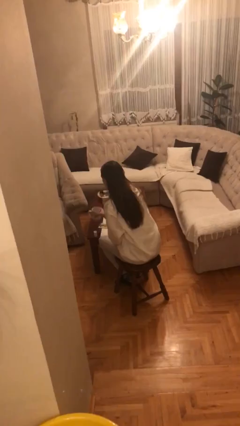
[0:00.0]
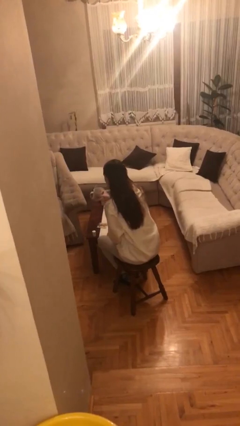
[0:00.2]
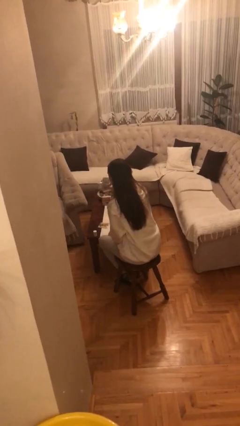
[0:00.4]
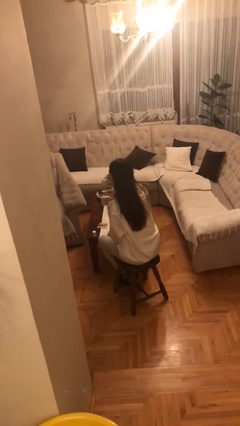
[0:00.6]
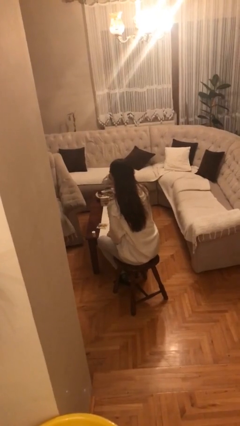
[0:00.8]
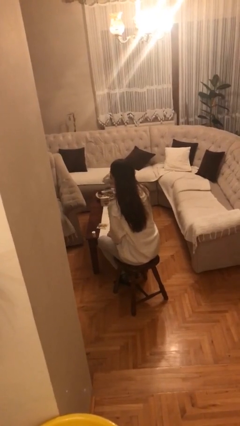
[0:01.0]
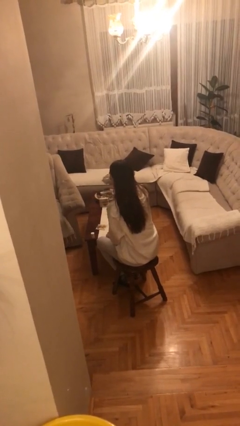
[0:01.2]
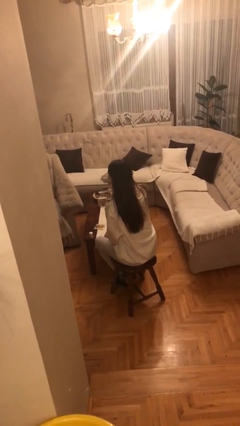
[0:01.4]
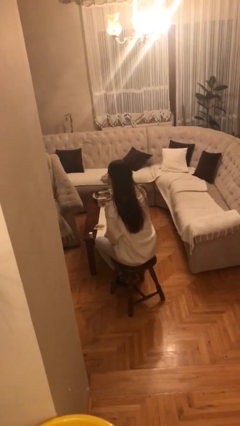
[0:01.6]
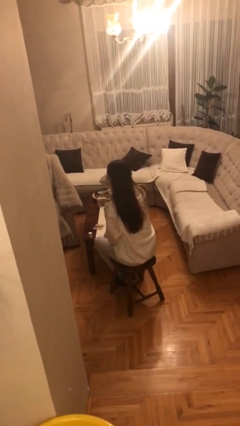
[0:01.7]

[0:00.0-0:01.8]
person drinks from cup

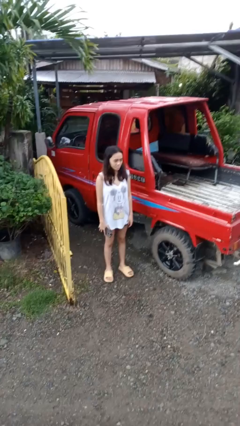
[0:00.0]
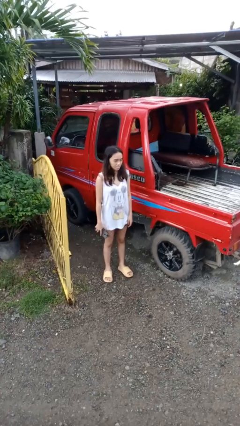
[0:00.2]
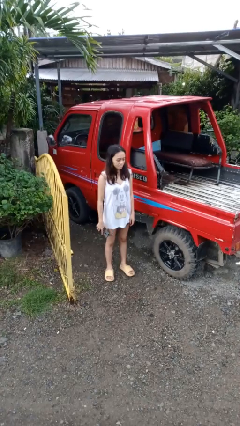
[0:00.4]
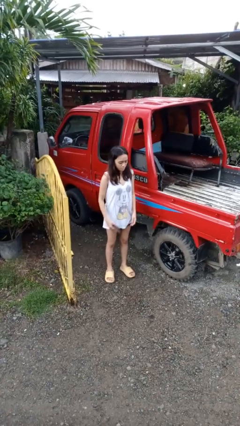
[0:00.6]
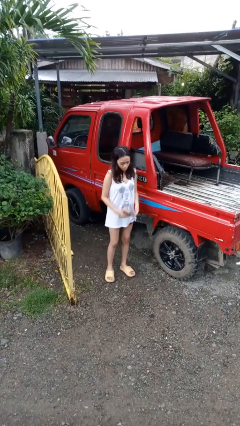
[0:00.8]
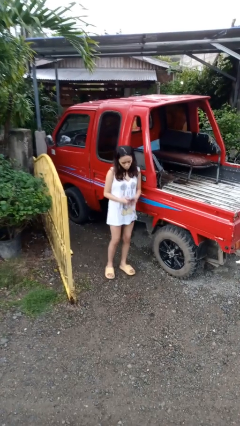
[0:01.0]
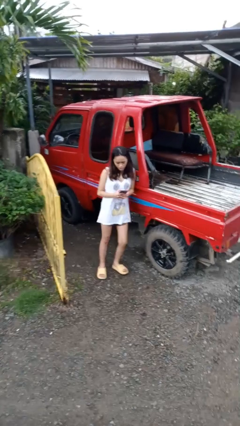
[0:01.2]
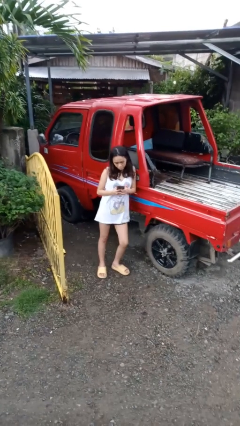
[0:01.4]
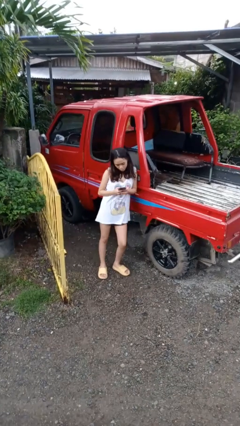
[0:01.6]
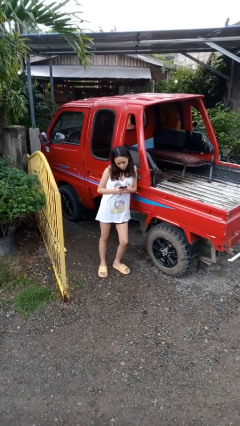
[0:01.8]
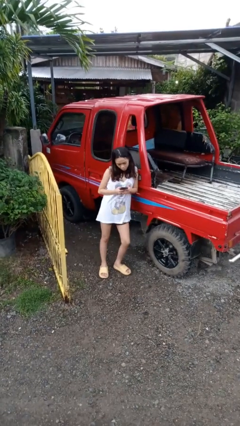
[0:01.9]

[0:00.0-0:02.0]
person leans against car

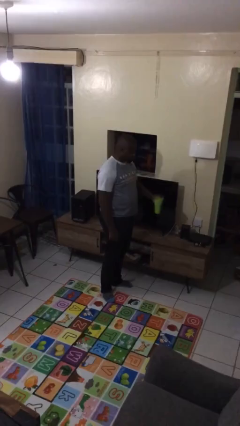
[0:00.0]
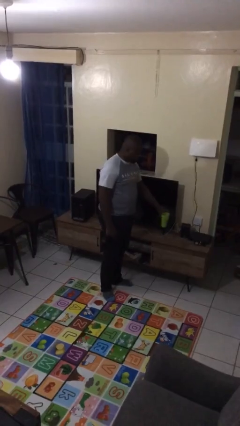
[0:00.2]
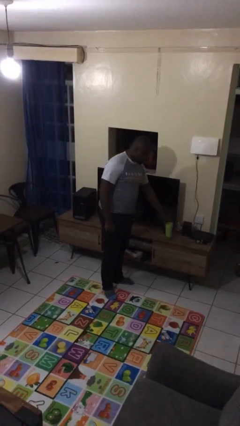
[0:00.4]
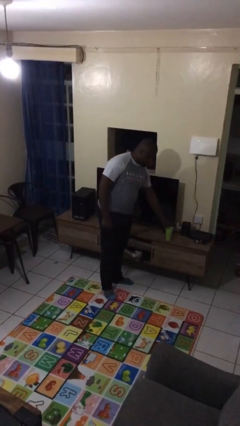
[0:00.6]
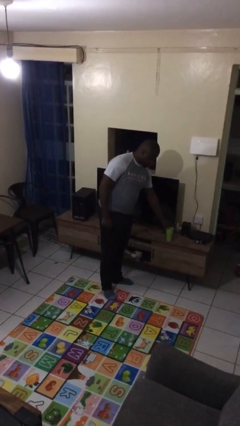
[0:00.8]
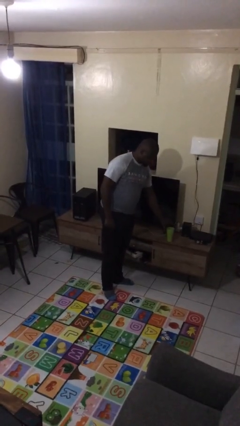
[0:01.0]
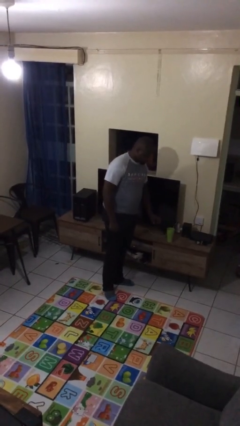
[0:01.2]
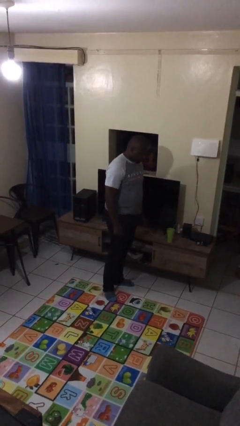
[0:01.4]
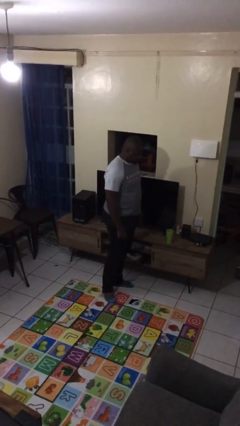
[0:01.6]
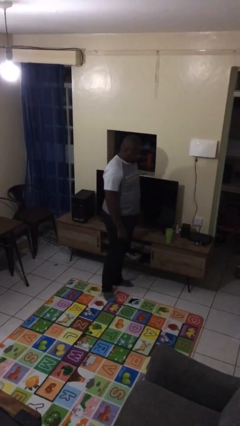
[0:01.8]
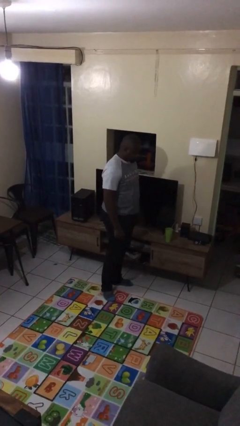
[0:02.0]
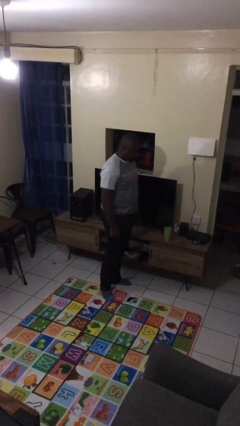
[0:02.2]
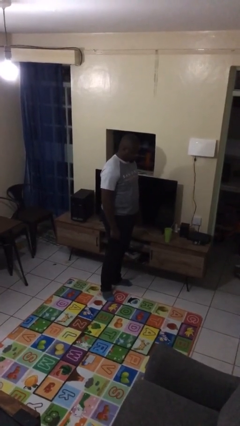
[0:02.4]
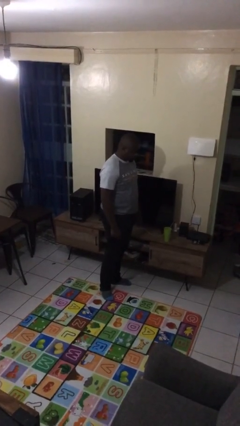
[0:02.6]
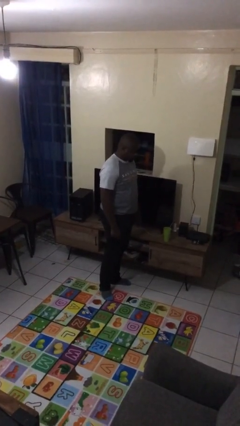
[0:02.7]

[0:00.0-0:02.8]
person puts down object on countertop

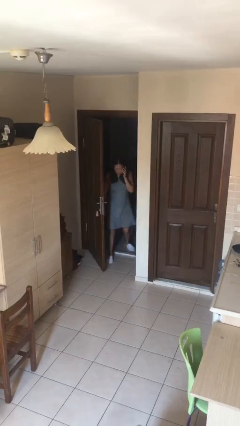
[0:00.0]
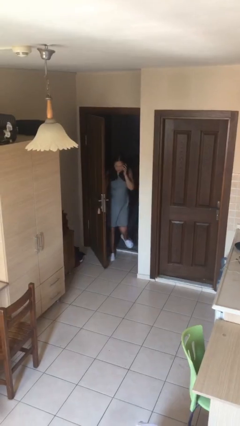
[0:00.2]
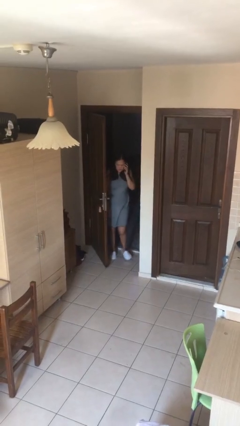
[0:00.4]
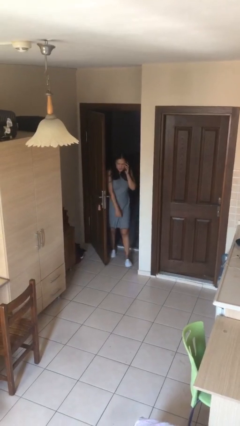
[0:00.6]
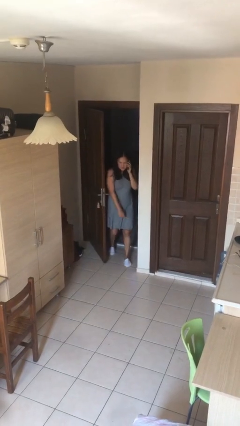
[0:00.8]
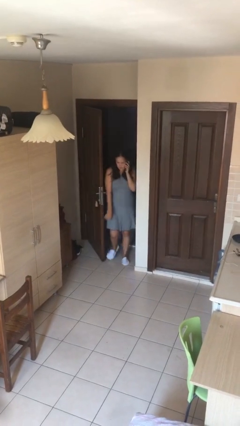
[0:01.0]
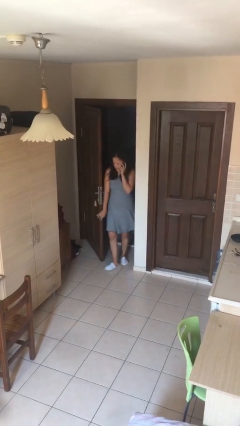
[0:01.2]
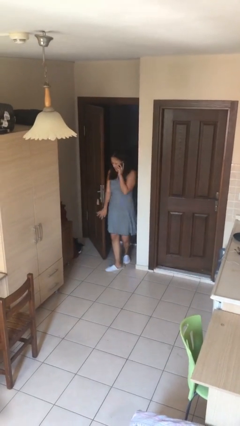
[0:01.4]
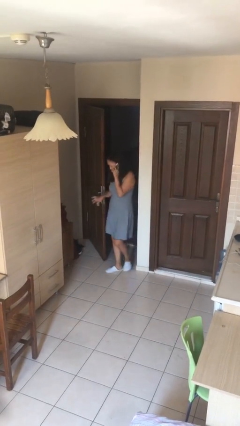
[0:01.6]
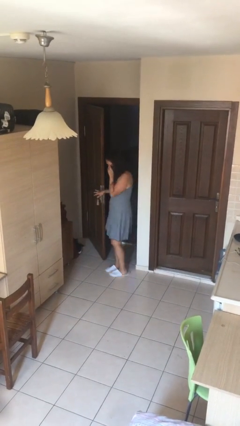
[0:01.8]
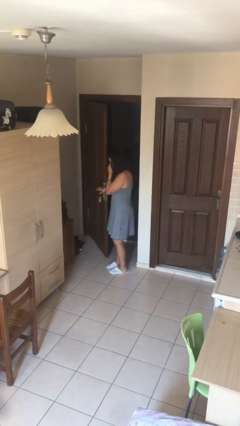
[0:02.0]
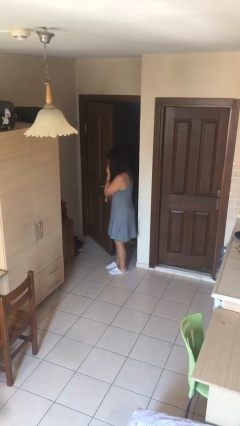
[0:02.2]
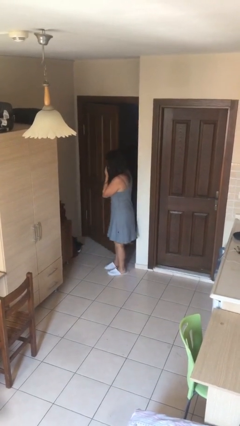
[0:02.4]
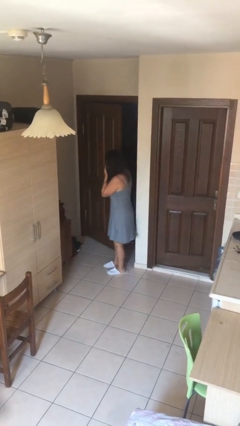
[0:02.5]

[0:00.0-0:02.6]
person enters scene through structure

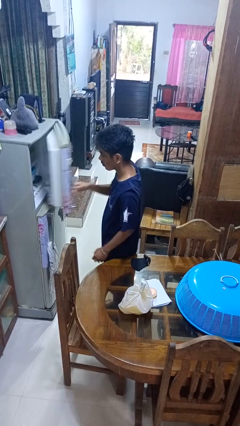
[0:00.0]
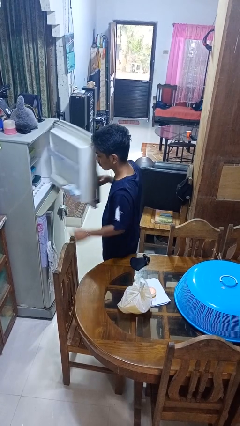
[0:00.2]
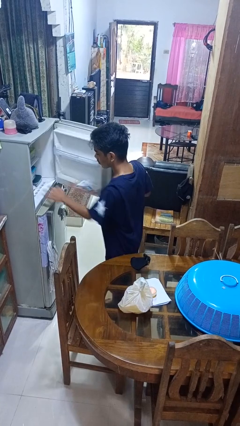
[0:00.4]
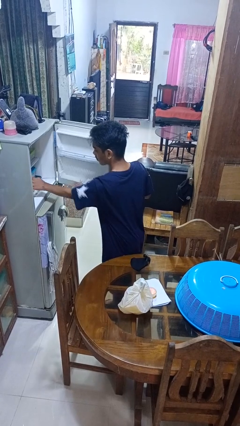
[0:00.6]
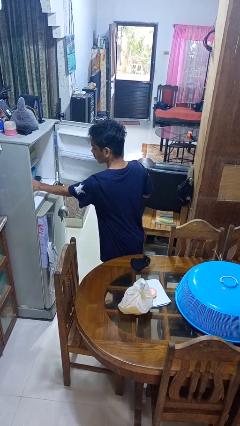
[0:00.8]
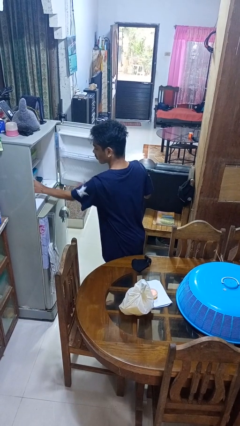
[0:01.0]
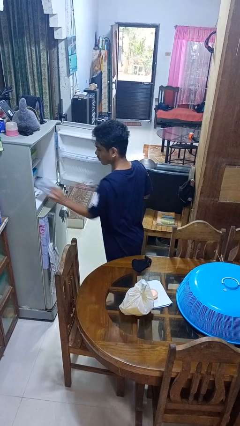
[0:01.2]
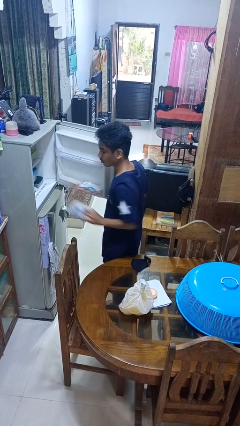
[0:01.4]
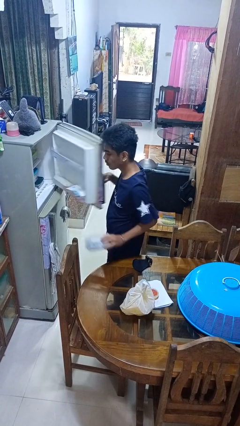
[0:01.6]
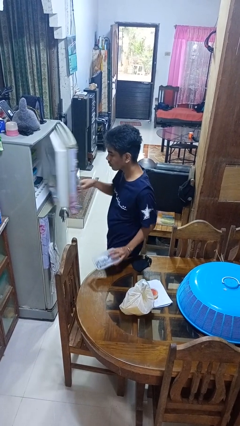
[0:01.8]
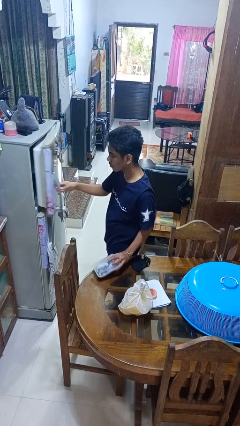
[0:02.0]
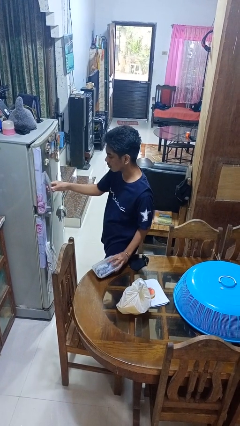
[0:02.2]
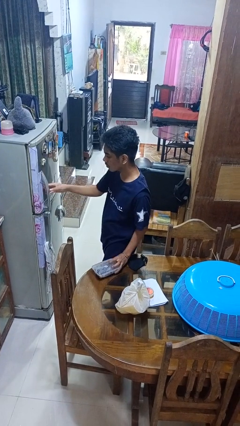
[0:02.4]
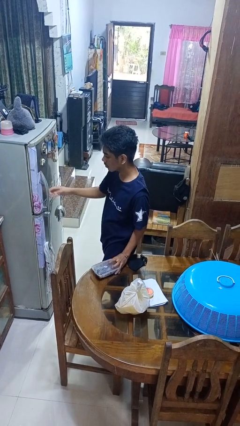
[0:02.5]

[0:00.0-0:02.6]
person takes object from refrigerator

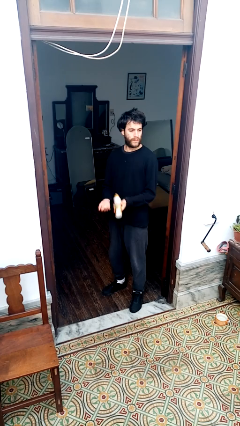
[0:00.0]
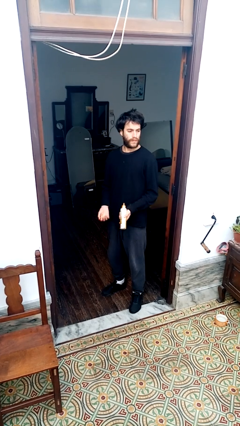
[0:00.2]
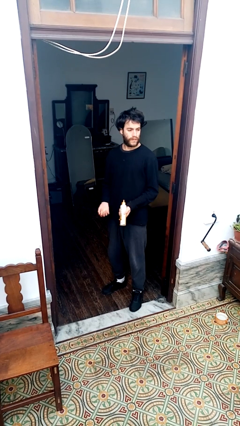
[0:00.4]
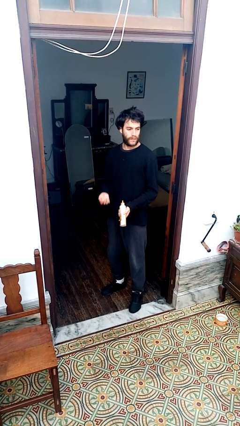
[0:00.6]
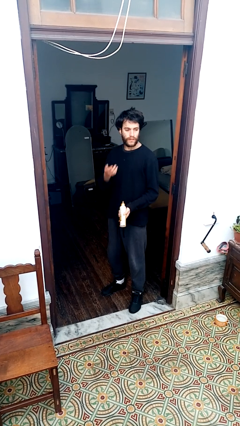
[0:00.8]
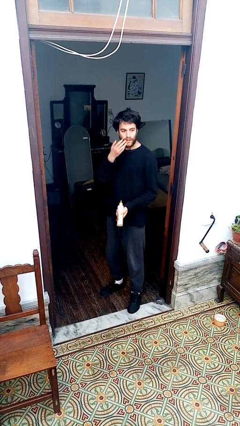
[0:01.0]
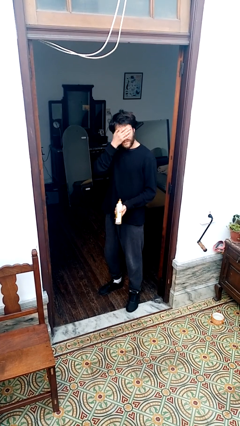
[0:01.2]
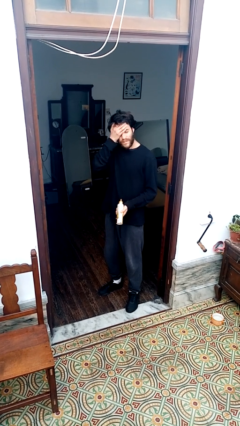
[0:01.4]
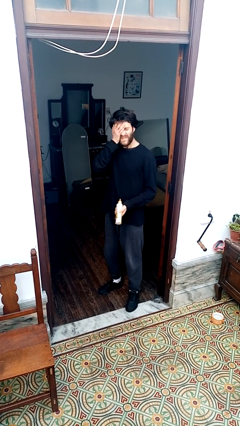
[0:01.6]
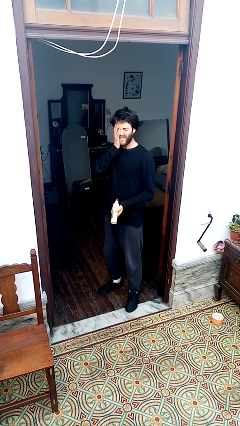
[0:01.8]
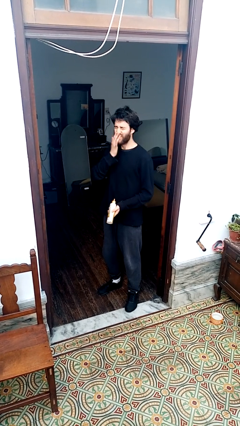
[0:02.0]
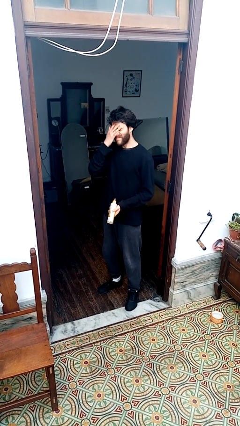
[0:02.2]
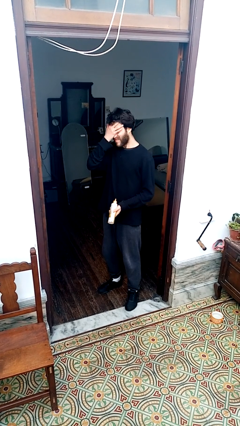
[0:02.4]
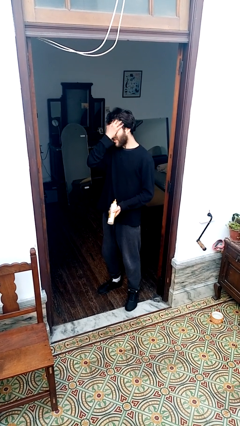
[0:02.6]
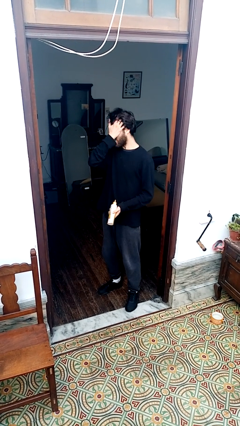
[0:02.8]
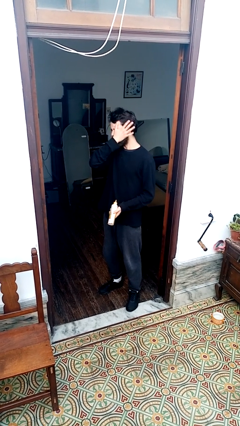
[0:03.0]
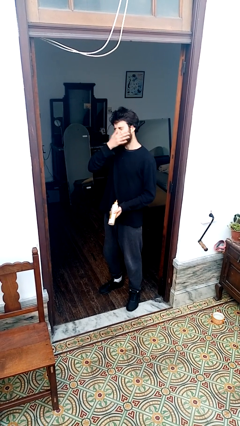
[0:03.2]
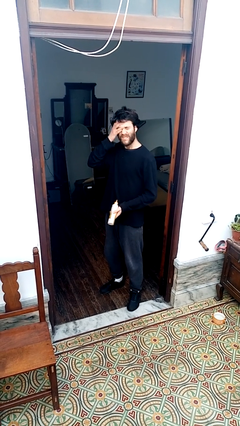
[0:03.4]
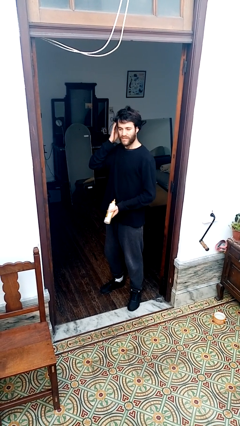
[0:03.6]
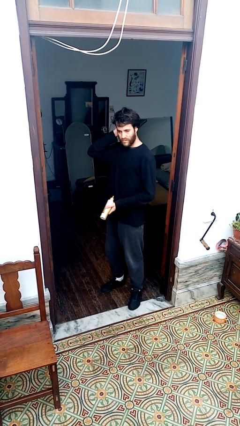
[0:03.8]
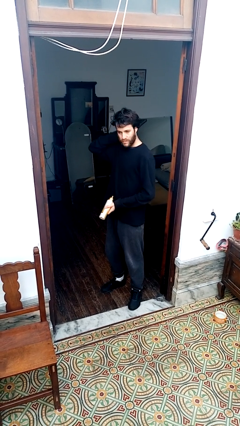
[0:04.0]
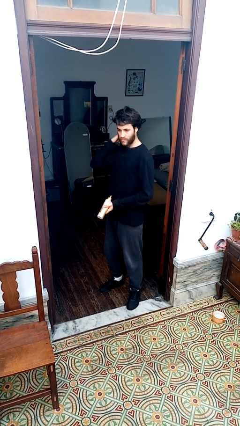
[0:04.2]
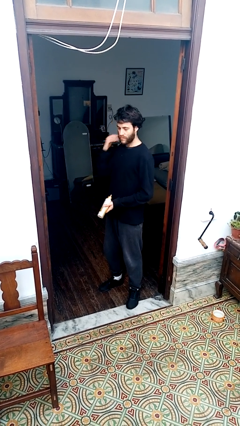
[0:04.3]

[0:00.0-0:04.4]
person applies facial moisturizer

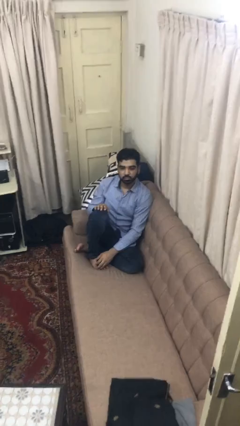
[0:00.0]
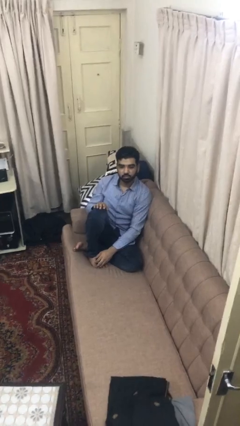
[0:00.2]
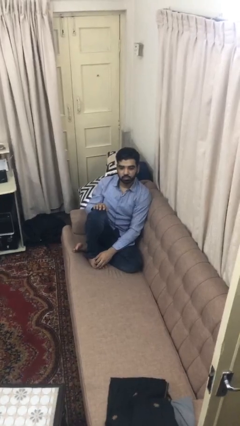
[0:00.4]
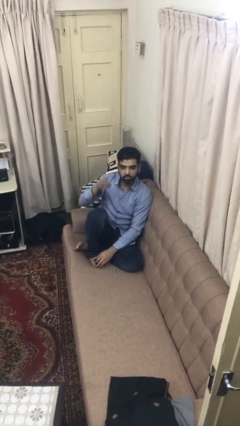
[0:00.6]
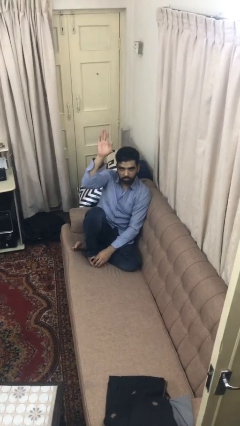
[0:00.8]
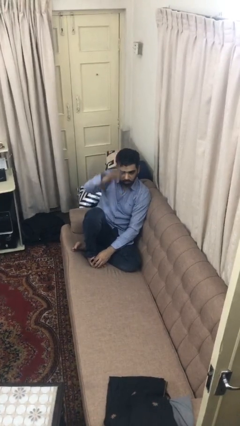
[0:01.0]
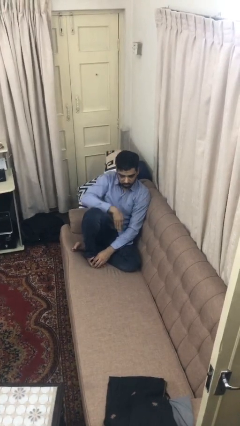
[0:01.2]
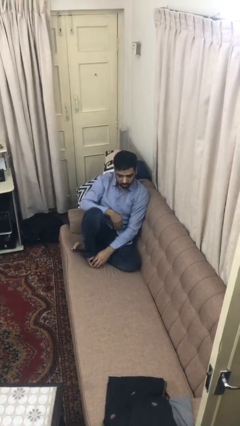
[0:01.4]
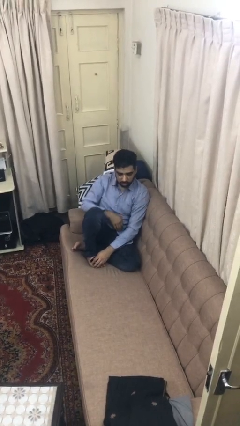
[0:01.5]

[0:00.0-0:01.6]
person gestures swipe down
